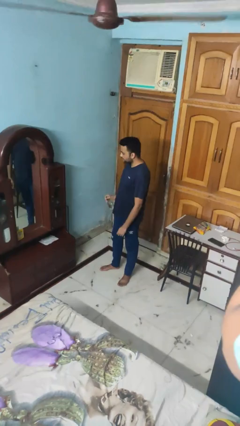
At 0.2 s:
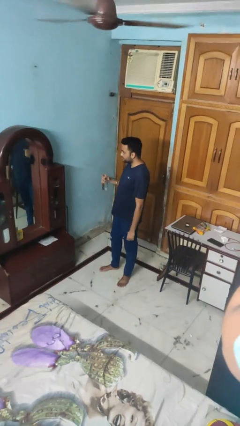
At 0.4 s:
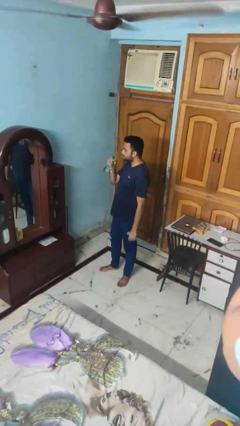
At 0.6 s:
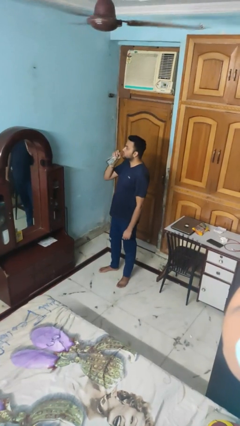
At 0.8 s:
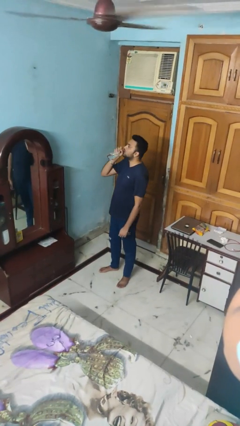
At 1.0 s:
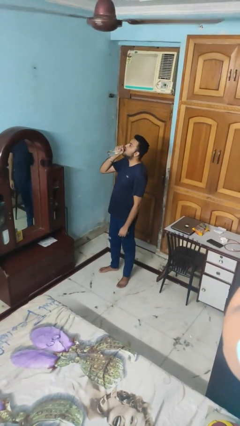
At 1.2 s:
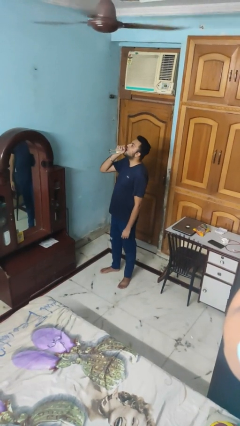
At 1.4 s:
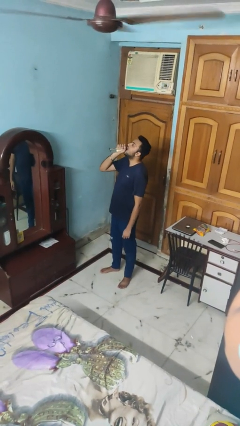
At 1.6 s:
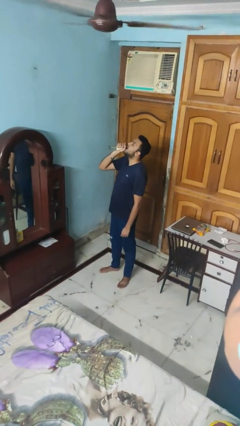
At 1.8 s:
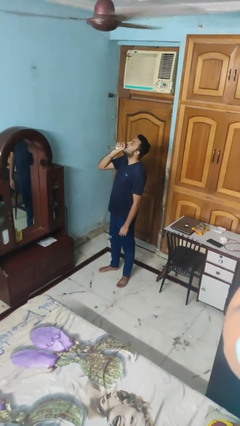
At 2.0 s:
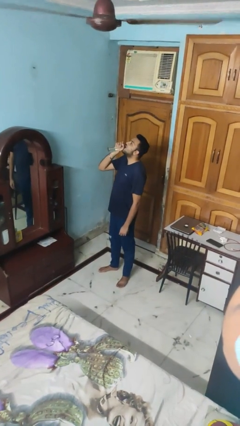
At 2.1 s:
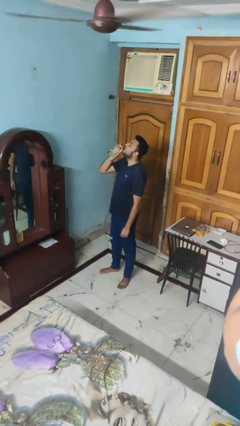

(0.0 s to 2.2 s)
person drinks from bottle

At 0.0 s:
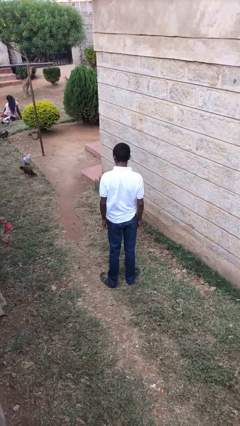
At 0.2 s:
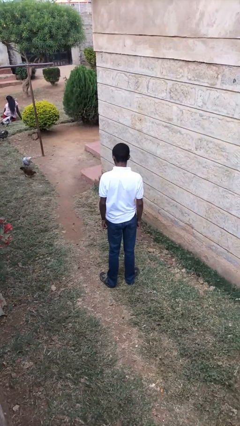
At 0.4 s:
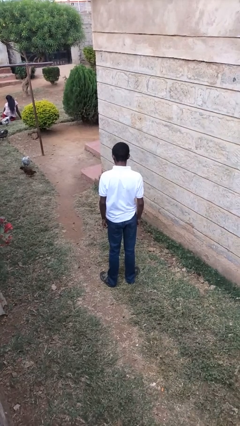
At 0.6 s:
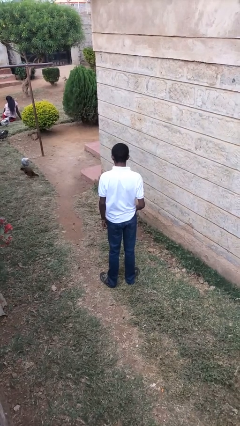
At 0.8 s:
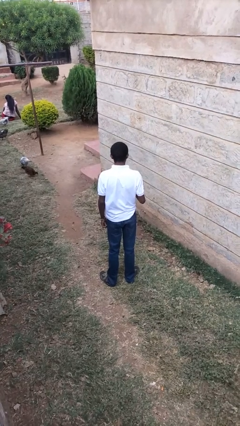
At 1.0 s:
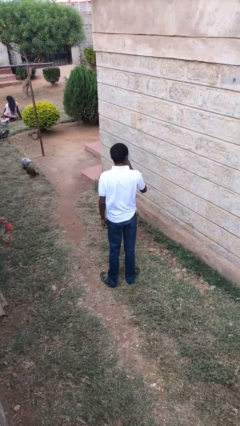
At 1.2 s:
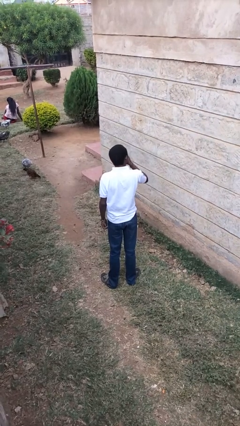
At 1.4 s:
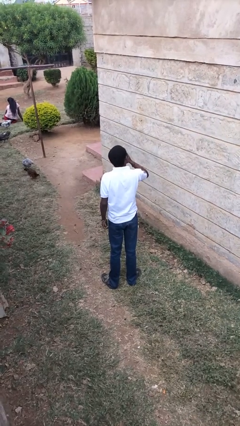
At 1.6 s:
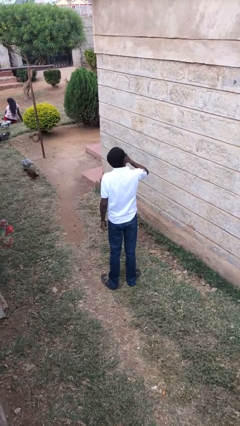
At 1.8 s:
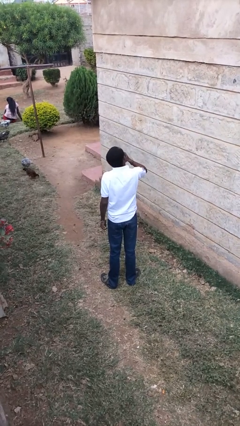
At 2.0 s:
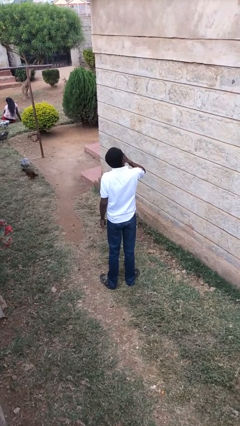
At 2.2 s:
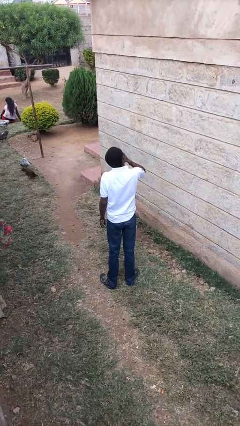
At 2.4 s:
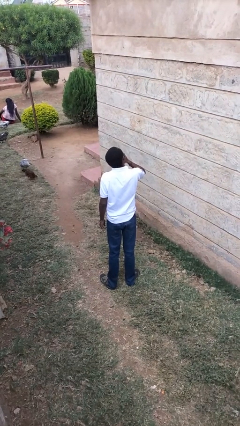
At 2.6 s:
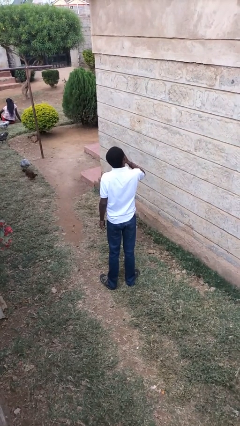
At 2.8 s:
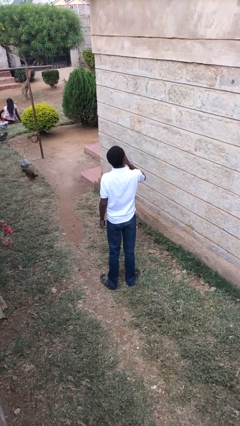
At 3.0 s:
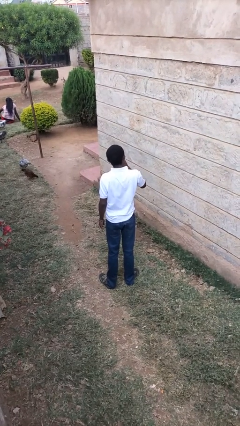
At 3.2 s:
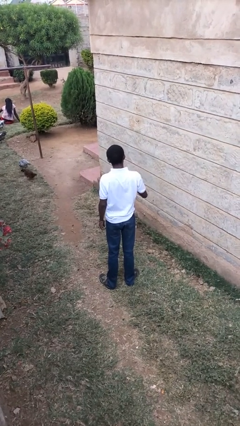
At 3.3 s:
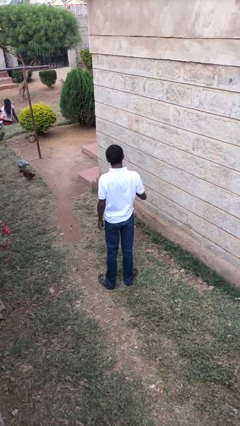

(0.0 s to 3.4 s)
person yawns

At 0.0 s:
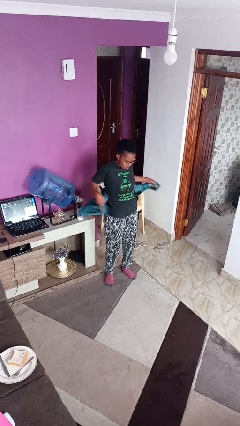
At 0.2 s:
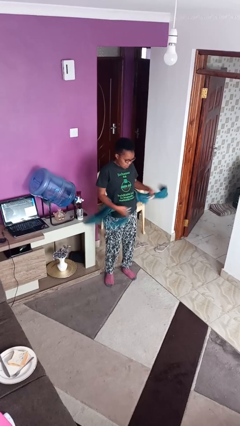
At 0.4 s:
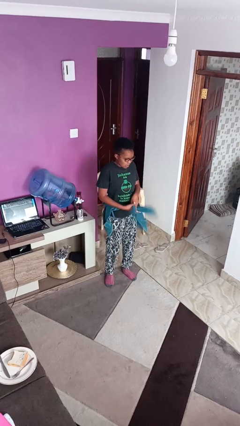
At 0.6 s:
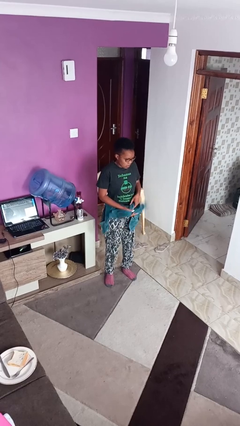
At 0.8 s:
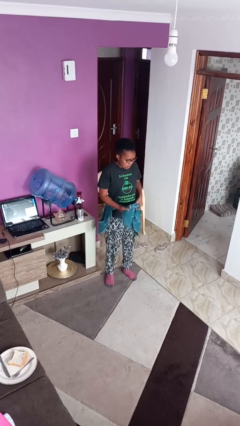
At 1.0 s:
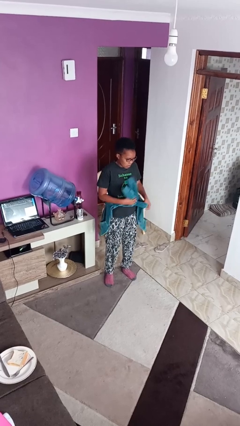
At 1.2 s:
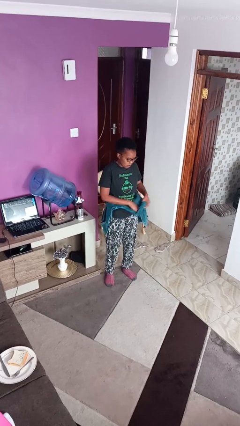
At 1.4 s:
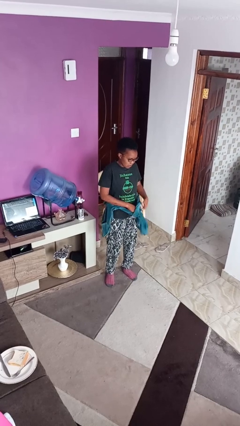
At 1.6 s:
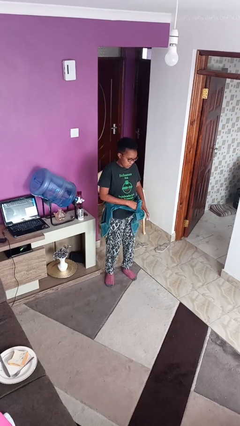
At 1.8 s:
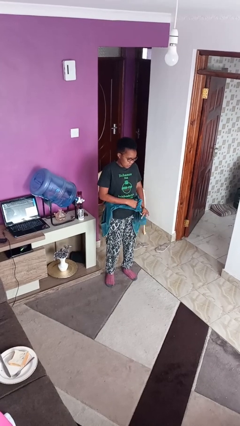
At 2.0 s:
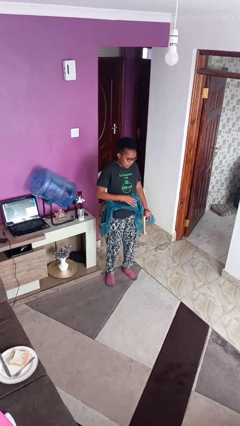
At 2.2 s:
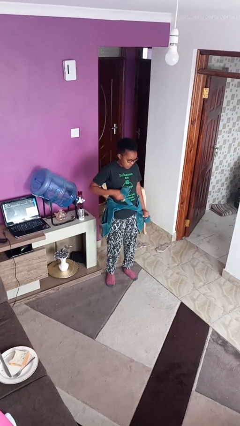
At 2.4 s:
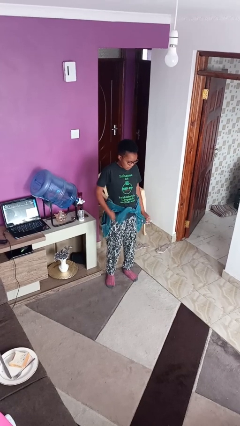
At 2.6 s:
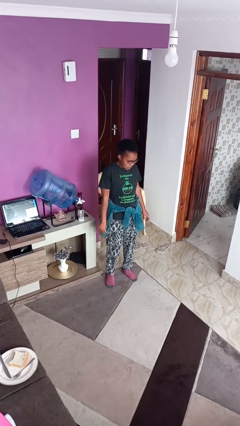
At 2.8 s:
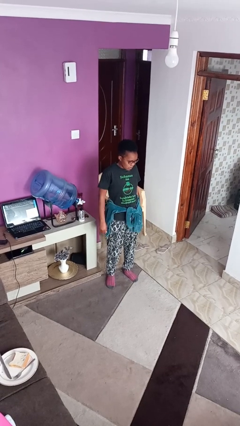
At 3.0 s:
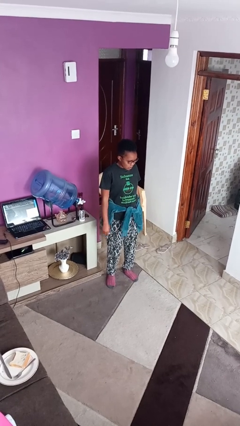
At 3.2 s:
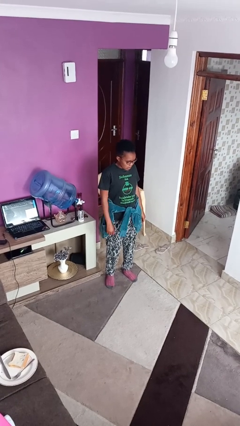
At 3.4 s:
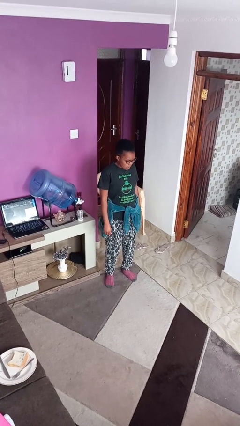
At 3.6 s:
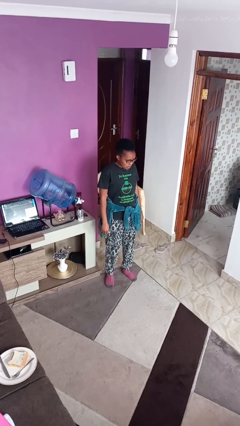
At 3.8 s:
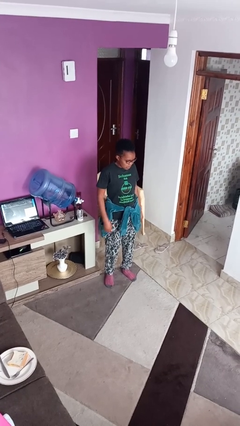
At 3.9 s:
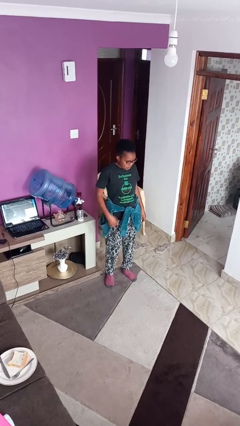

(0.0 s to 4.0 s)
person ties jacket around waist

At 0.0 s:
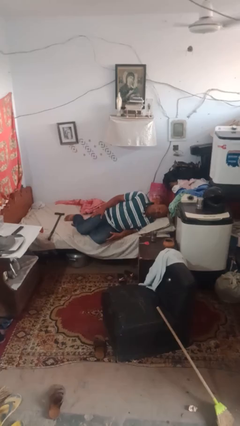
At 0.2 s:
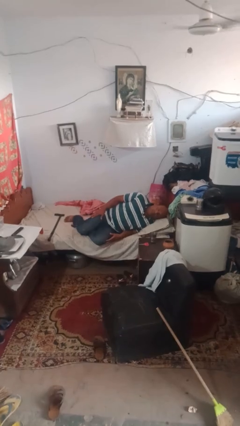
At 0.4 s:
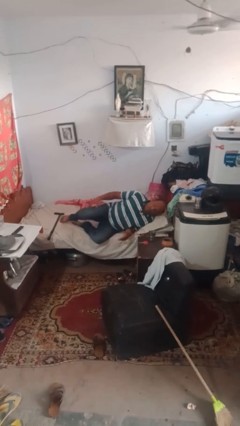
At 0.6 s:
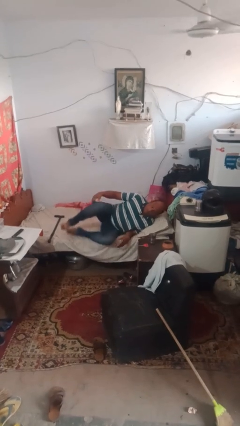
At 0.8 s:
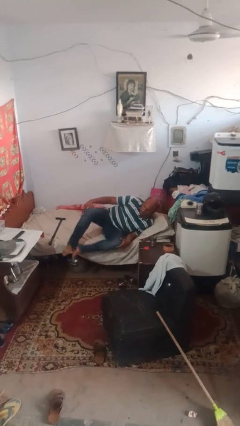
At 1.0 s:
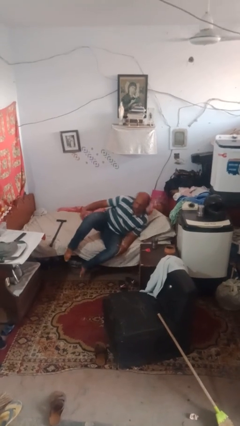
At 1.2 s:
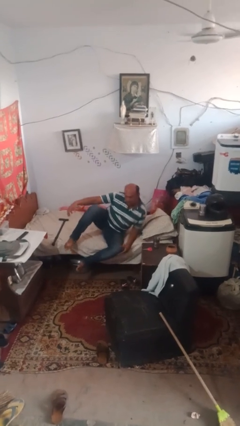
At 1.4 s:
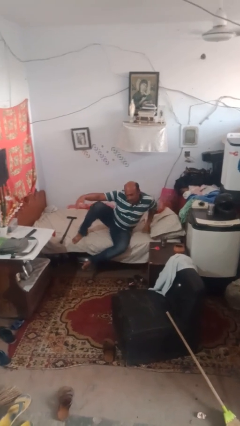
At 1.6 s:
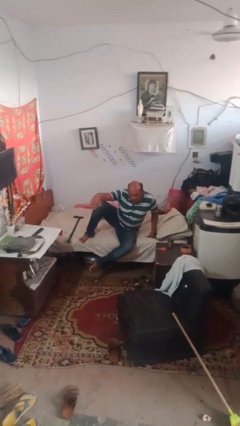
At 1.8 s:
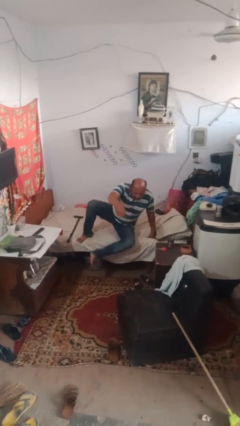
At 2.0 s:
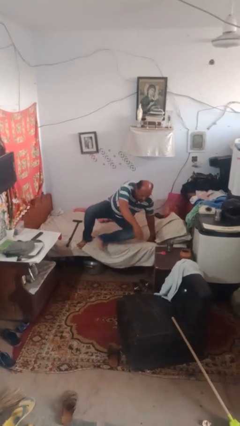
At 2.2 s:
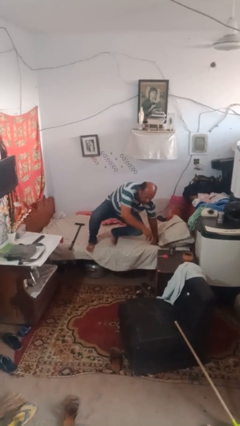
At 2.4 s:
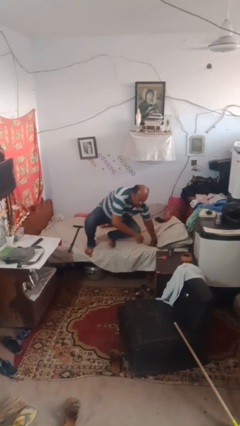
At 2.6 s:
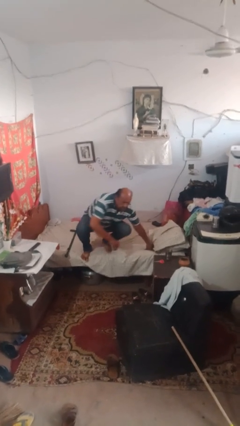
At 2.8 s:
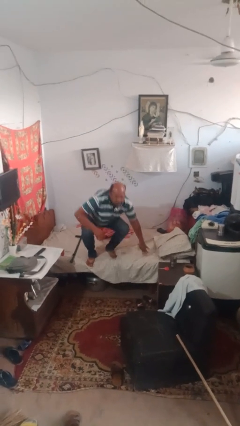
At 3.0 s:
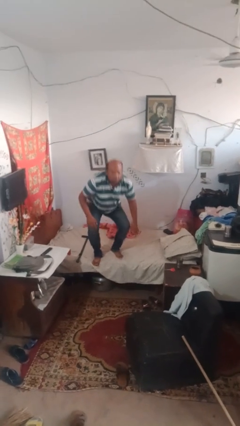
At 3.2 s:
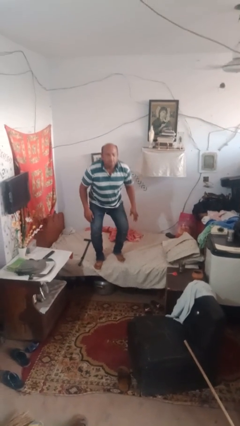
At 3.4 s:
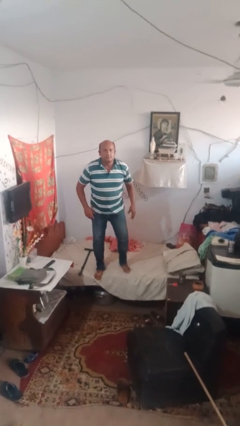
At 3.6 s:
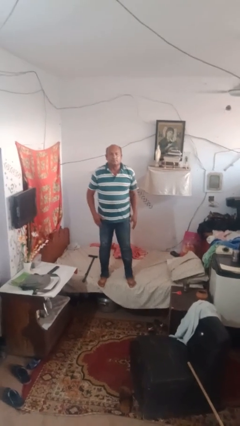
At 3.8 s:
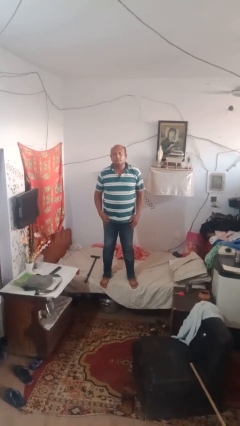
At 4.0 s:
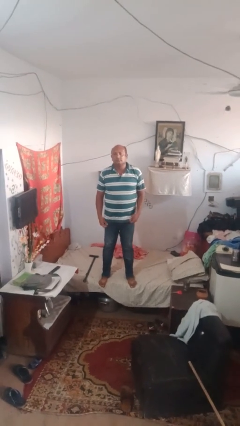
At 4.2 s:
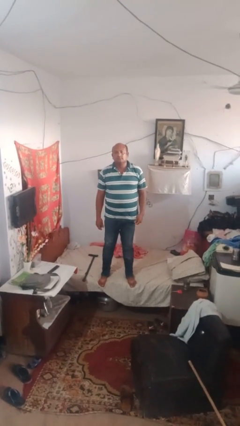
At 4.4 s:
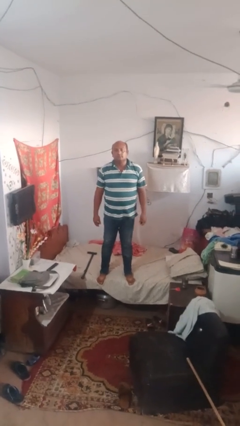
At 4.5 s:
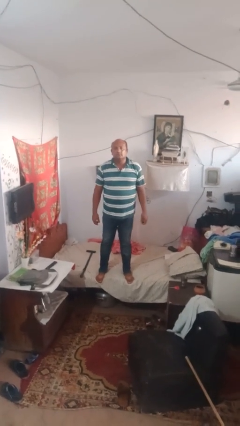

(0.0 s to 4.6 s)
person stands up

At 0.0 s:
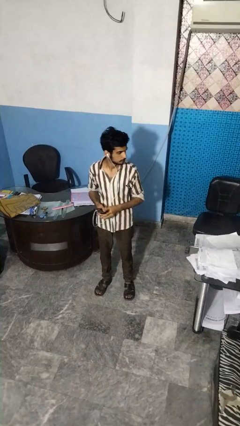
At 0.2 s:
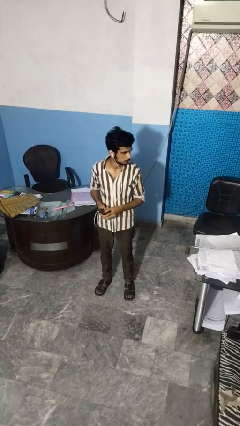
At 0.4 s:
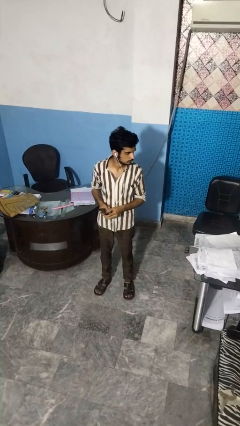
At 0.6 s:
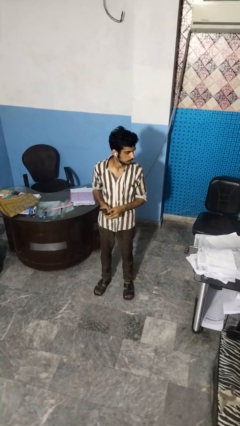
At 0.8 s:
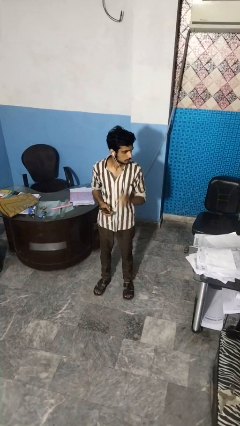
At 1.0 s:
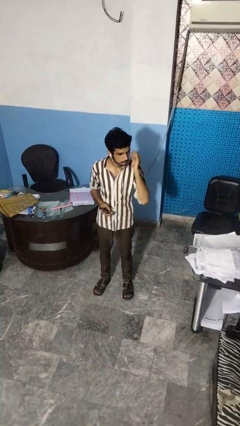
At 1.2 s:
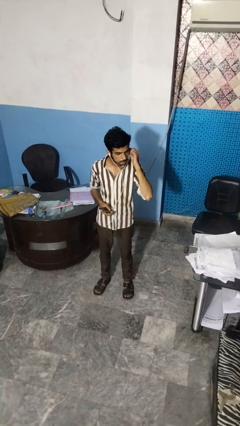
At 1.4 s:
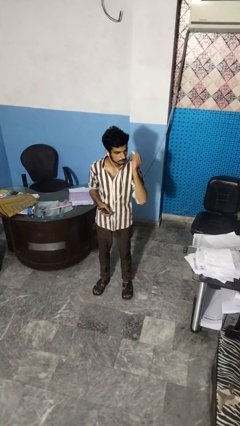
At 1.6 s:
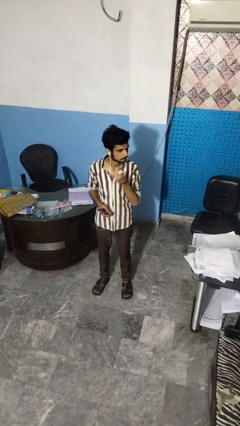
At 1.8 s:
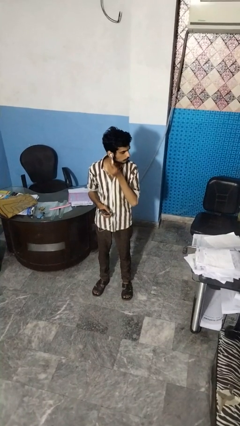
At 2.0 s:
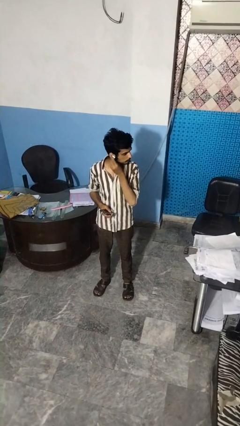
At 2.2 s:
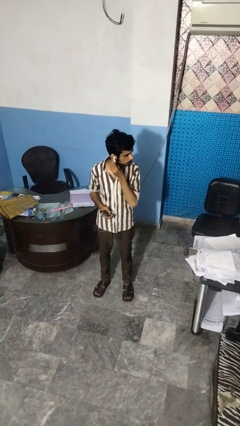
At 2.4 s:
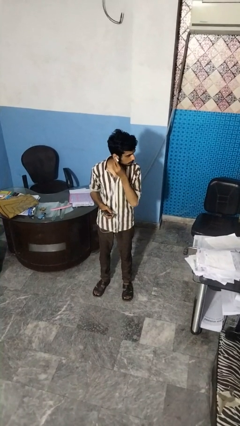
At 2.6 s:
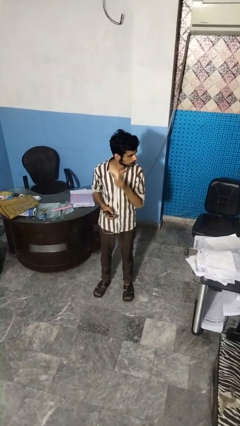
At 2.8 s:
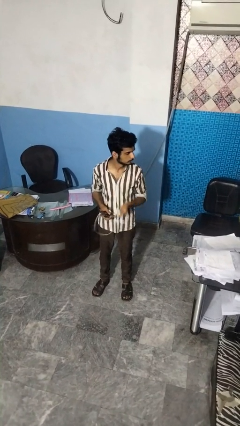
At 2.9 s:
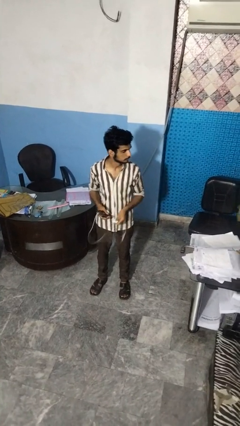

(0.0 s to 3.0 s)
person takes off headphones

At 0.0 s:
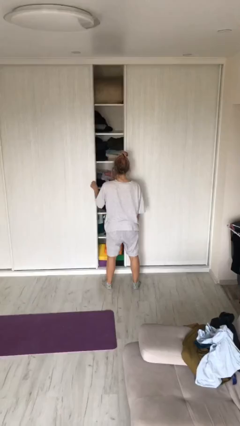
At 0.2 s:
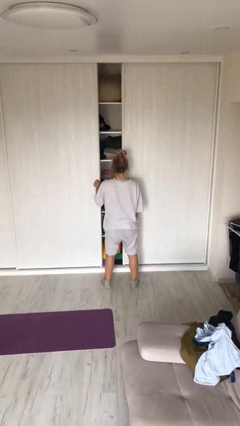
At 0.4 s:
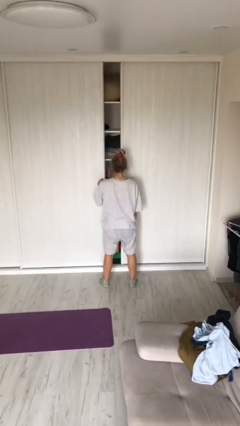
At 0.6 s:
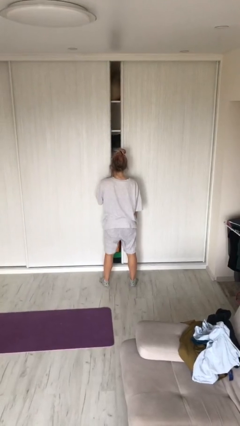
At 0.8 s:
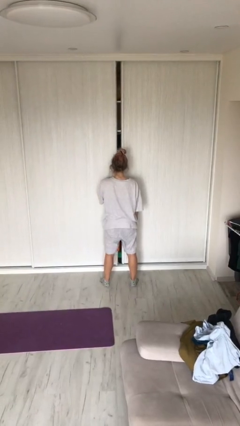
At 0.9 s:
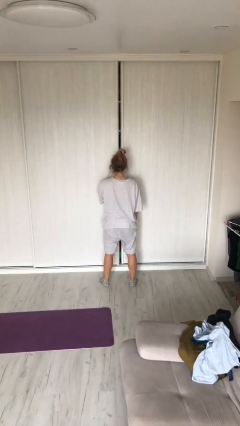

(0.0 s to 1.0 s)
person closes sliding door
